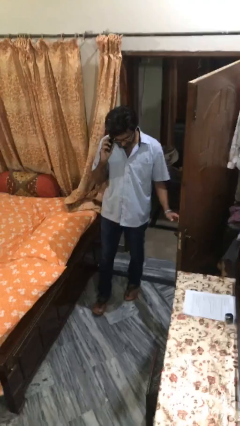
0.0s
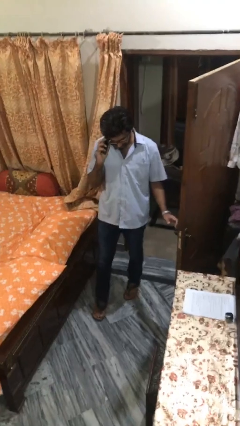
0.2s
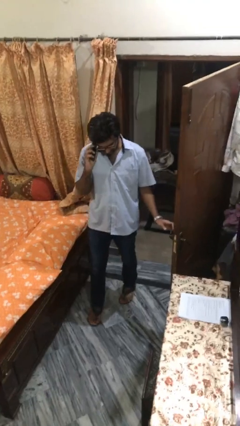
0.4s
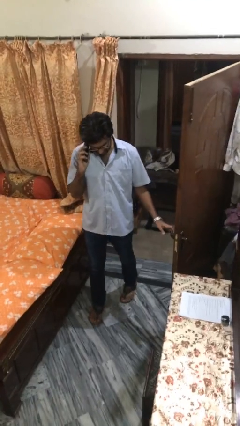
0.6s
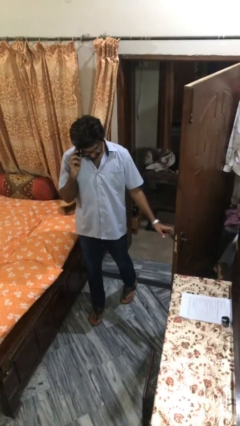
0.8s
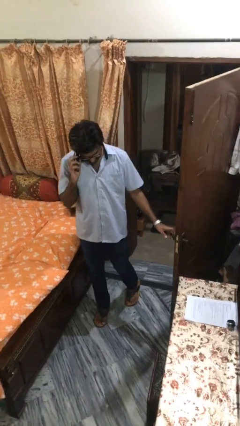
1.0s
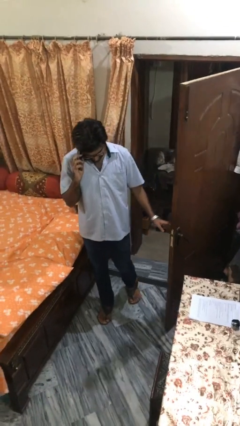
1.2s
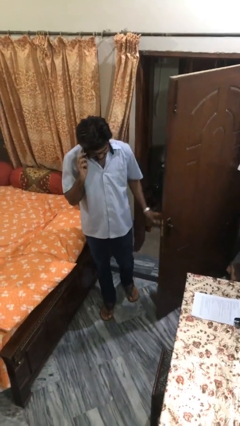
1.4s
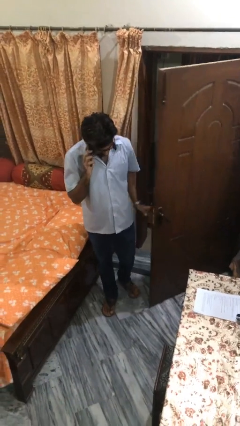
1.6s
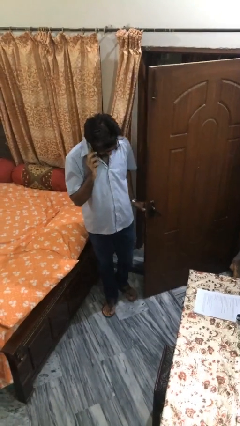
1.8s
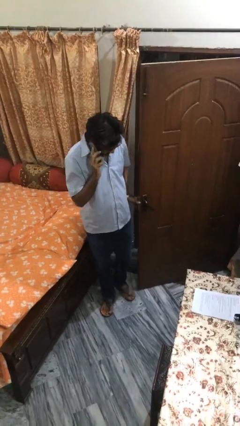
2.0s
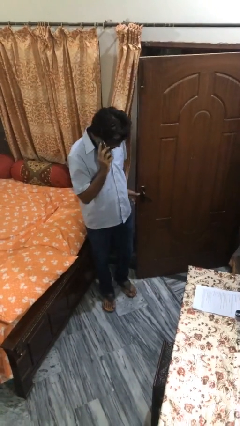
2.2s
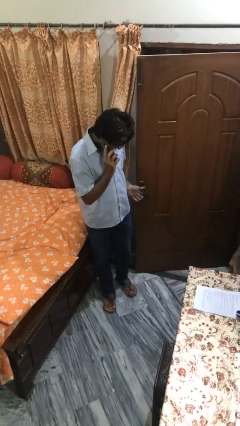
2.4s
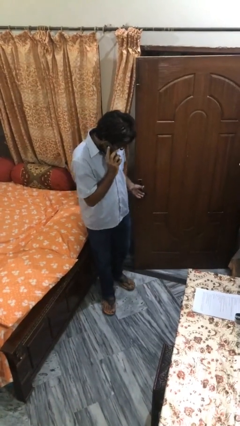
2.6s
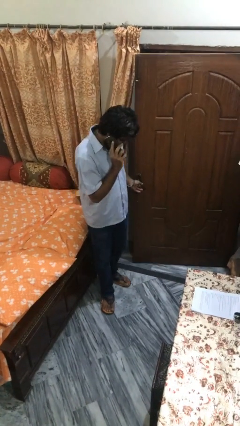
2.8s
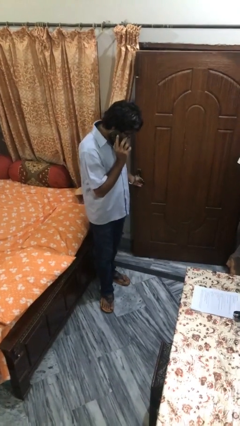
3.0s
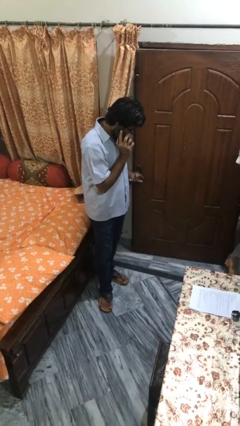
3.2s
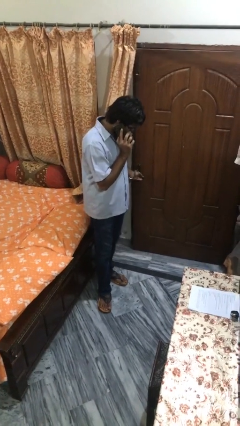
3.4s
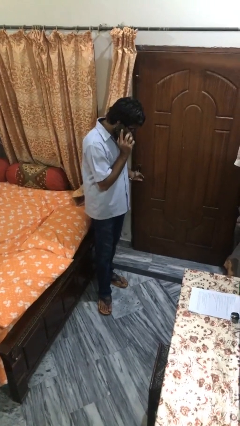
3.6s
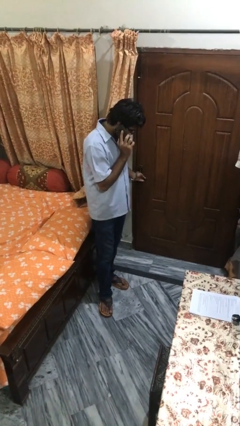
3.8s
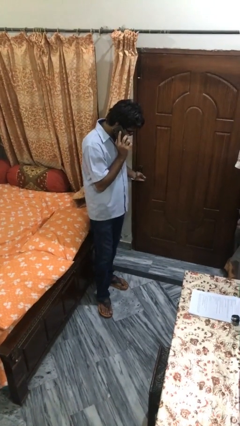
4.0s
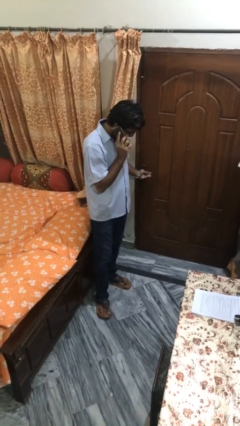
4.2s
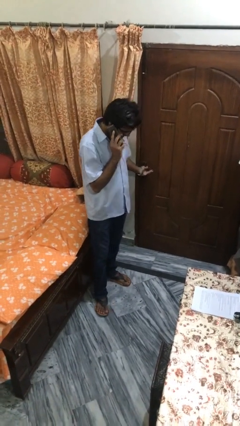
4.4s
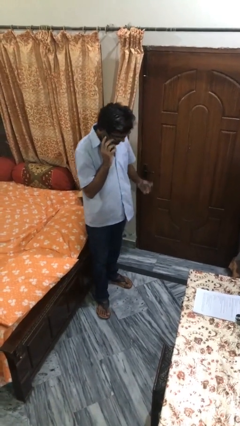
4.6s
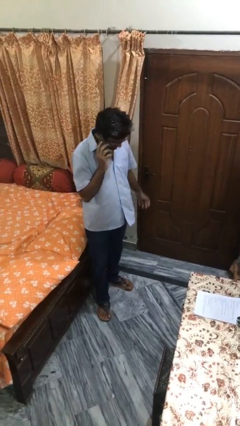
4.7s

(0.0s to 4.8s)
person closes facility door

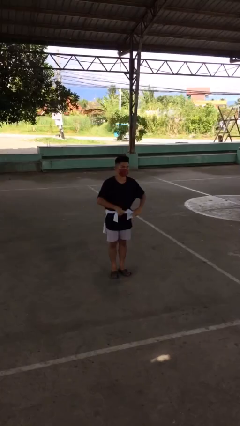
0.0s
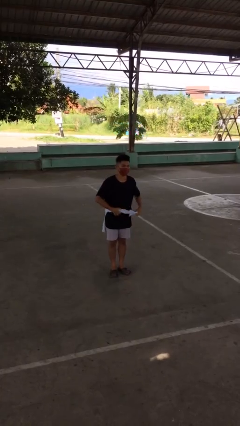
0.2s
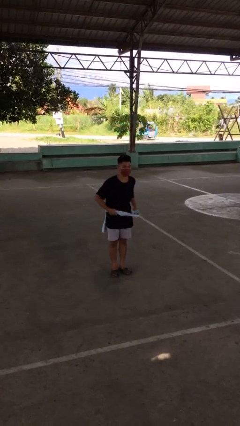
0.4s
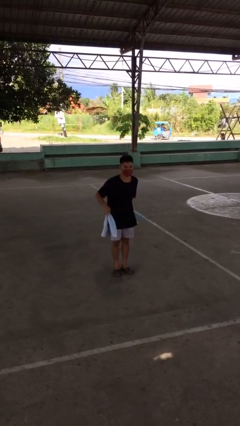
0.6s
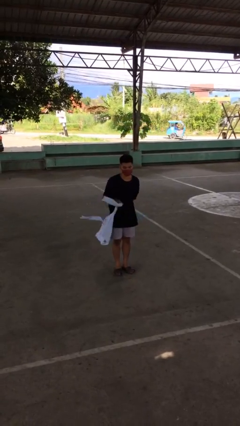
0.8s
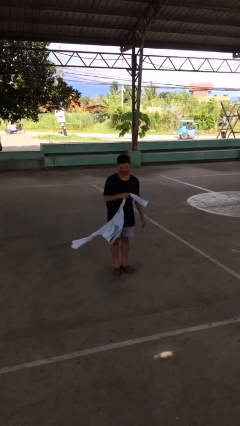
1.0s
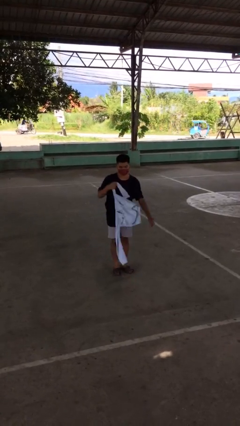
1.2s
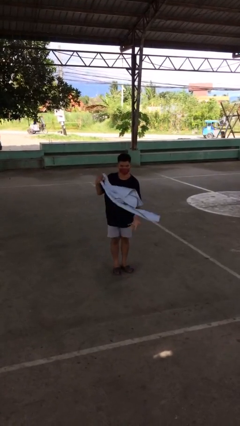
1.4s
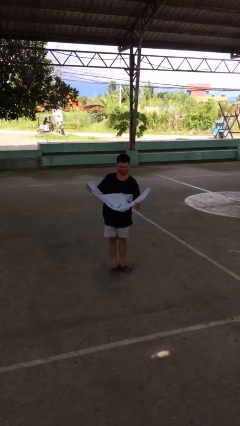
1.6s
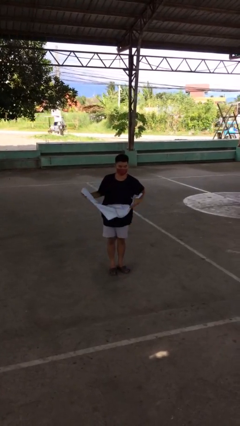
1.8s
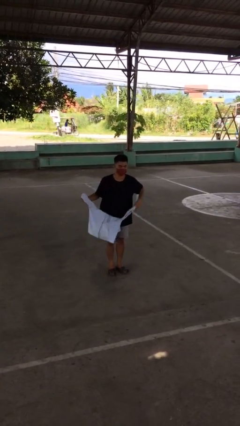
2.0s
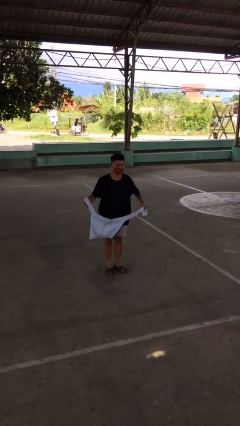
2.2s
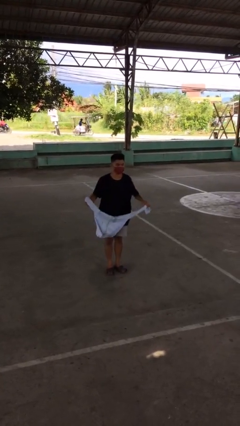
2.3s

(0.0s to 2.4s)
person unties jacket around waist

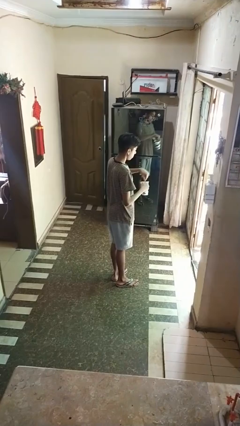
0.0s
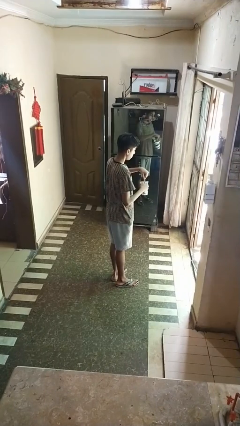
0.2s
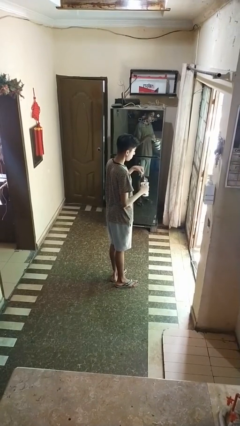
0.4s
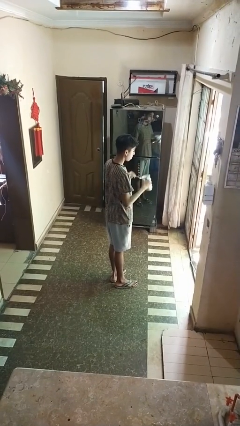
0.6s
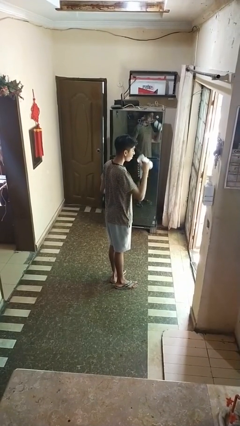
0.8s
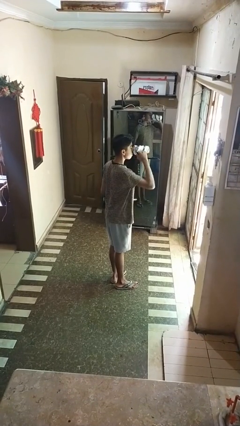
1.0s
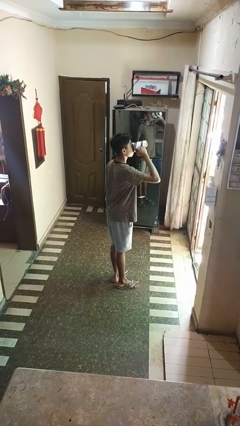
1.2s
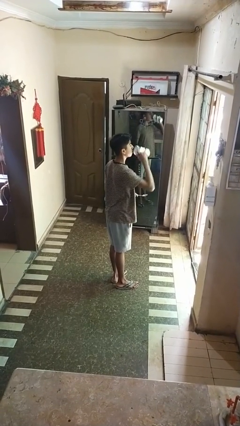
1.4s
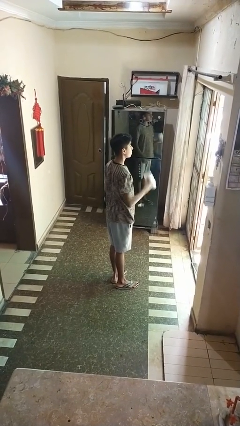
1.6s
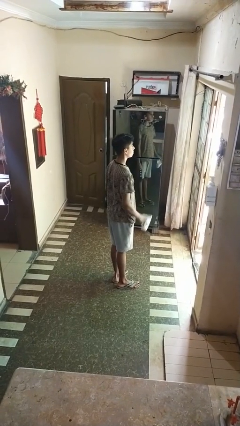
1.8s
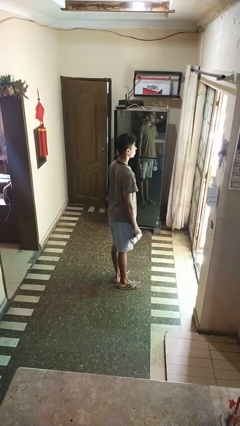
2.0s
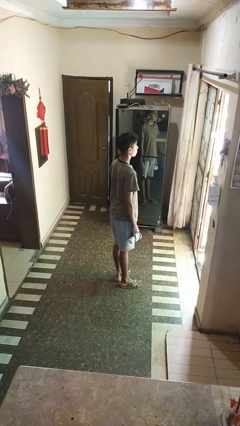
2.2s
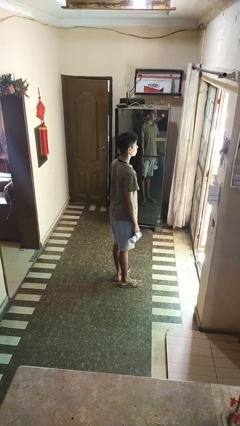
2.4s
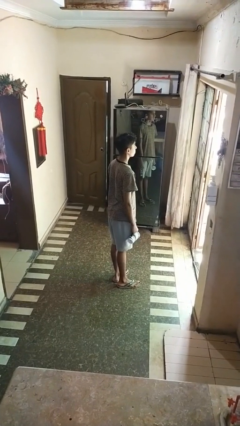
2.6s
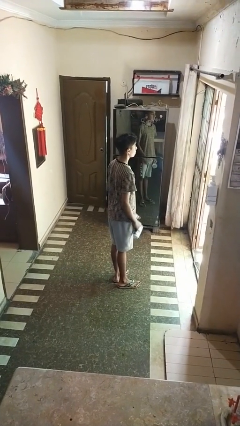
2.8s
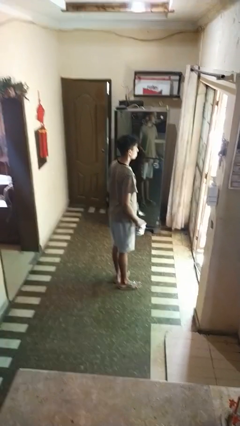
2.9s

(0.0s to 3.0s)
person drinks from mug

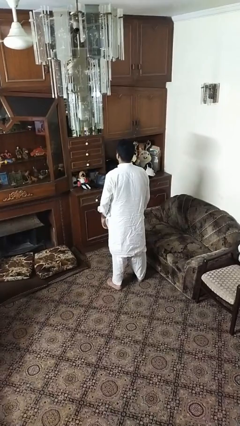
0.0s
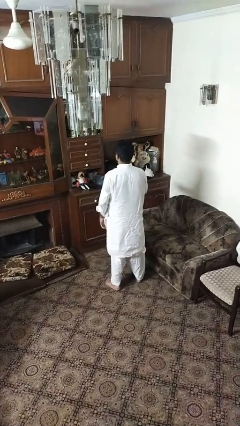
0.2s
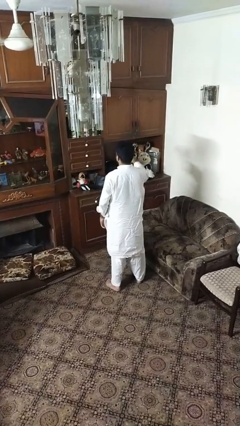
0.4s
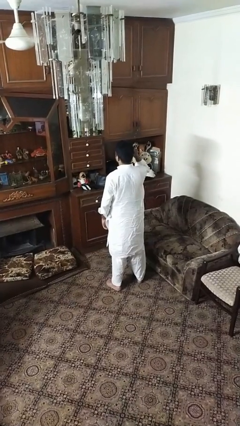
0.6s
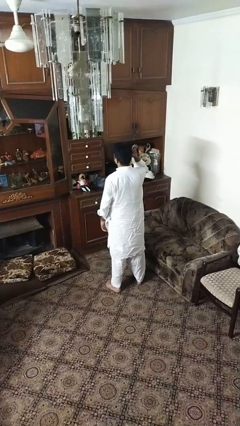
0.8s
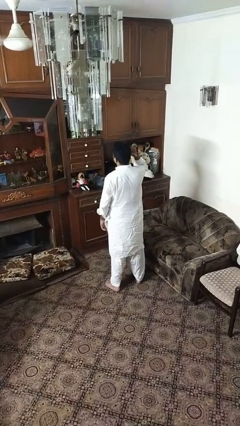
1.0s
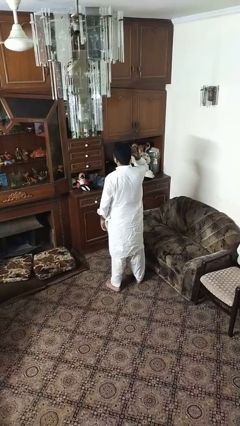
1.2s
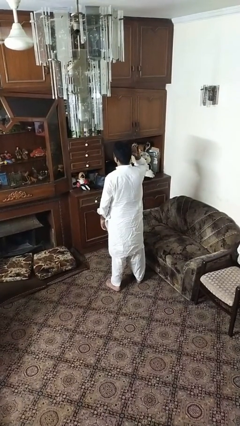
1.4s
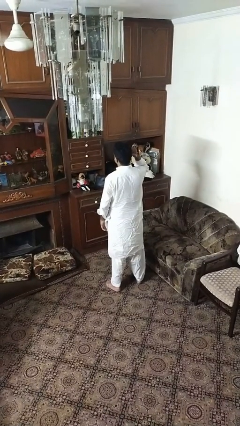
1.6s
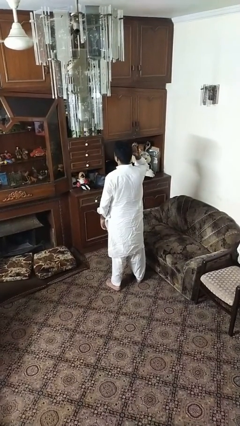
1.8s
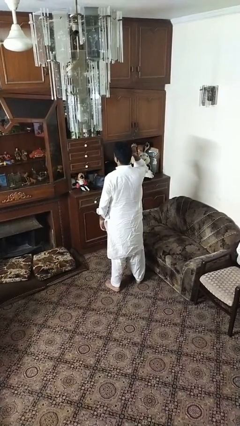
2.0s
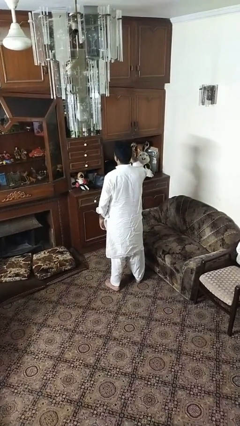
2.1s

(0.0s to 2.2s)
person gestures behind me

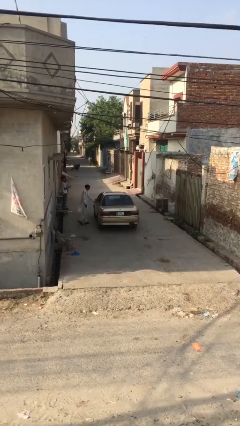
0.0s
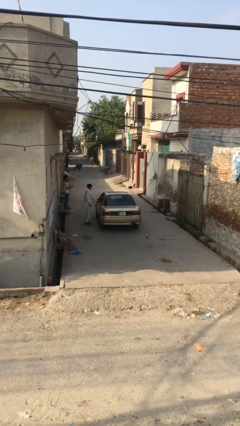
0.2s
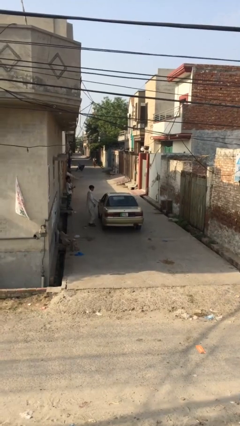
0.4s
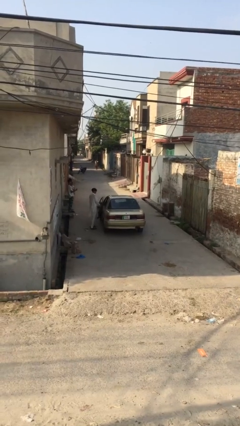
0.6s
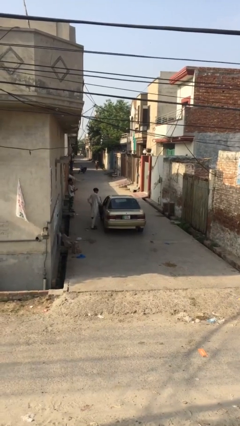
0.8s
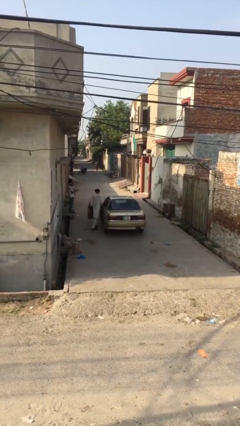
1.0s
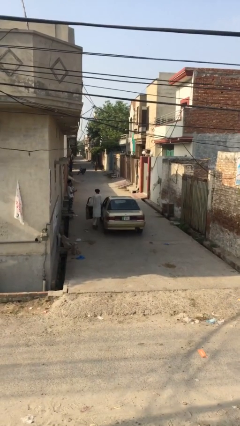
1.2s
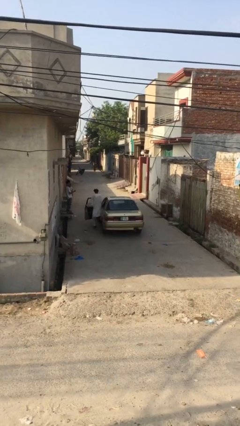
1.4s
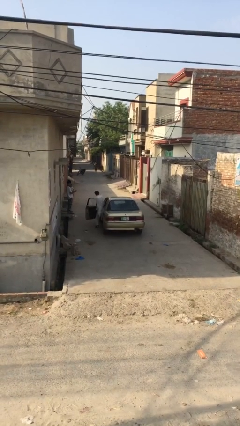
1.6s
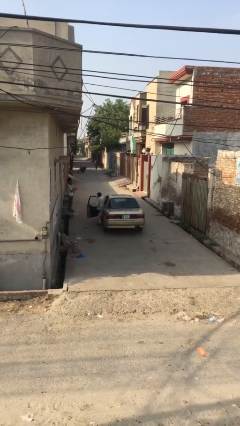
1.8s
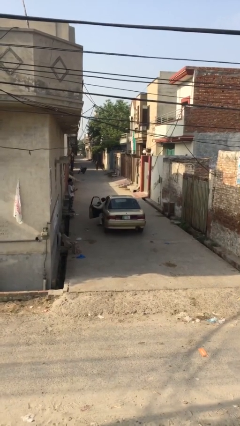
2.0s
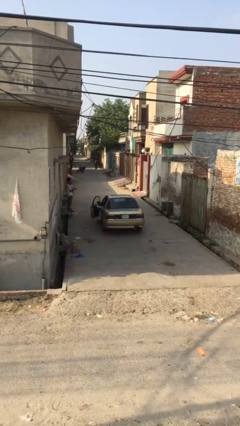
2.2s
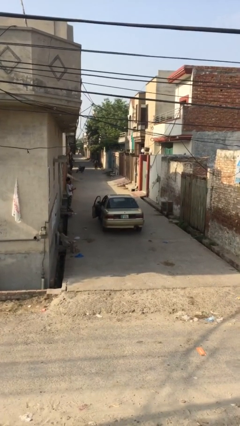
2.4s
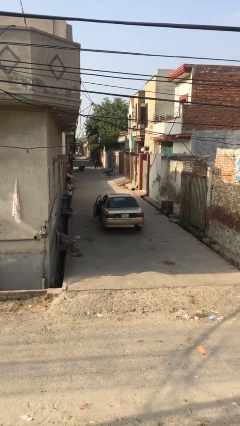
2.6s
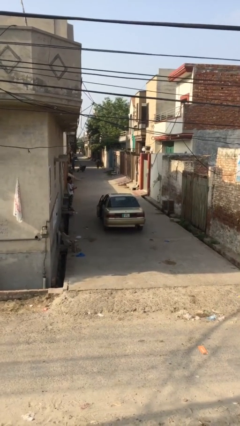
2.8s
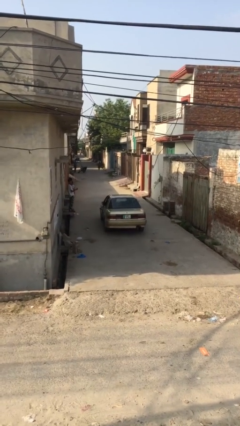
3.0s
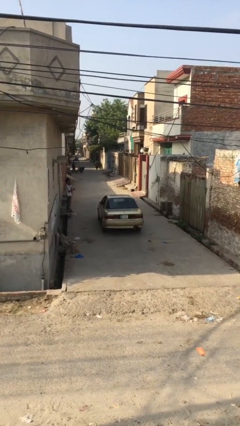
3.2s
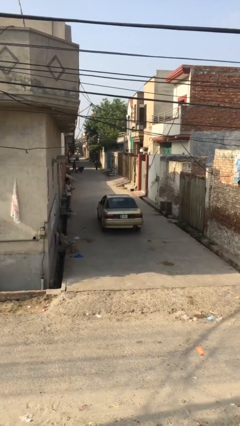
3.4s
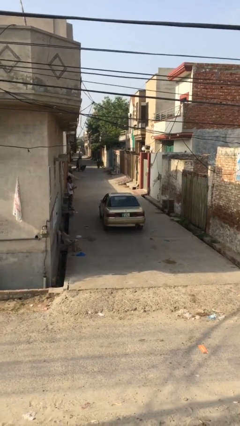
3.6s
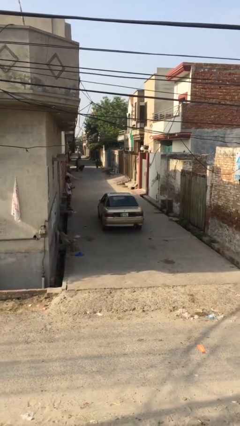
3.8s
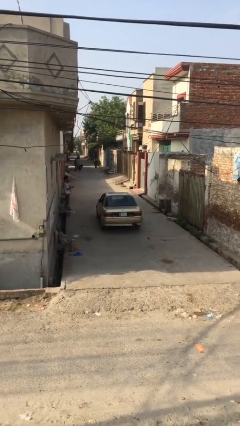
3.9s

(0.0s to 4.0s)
car picks up person

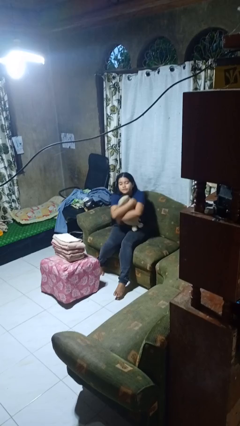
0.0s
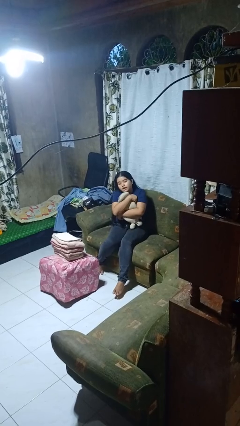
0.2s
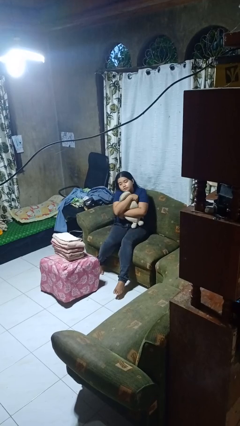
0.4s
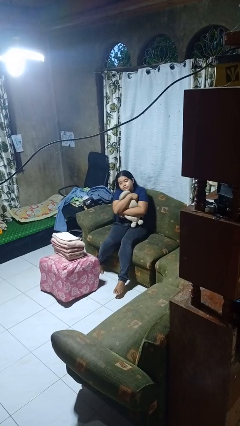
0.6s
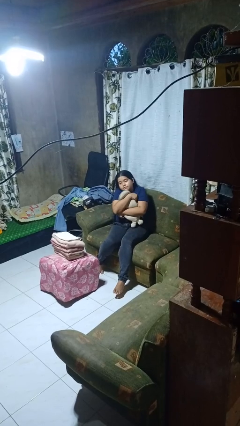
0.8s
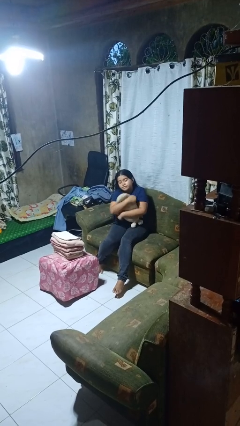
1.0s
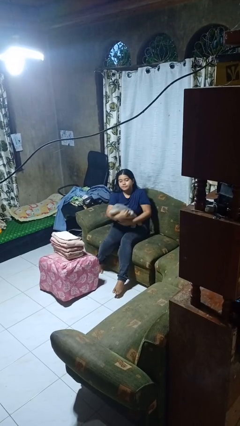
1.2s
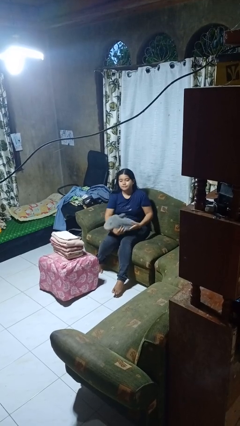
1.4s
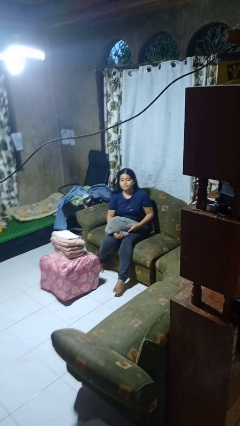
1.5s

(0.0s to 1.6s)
person hugs stuffed animal
